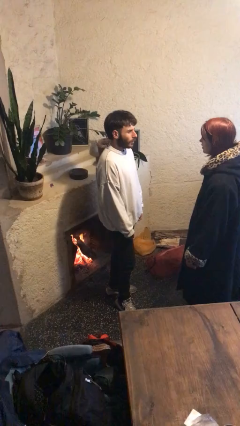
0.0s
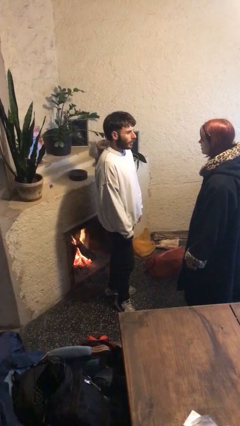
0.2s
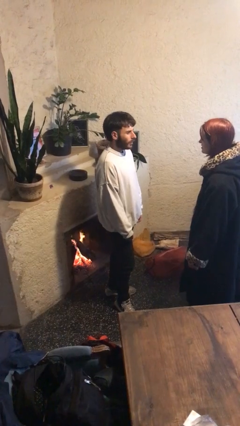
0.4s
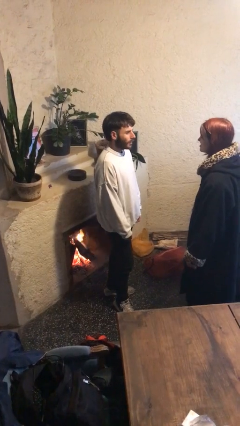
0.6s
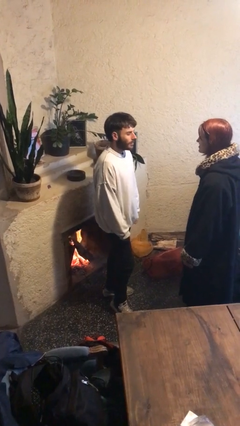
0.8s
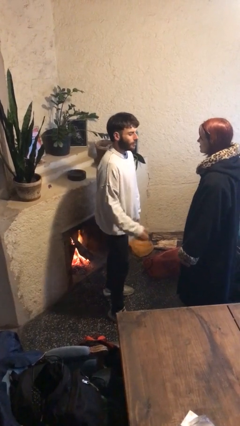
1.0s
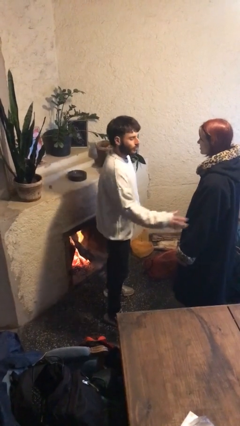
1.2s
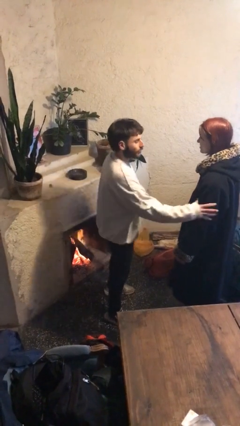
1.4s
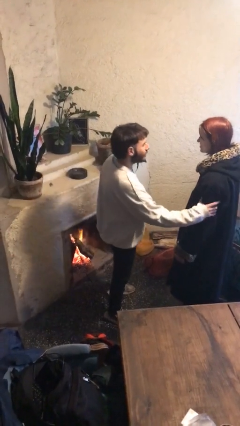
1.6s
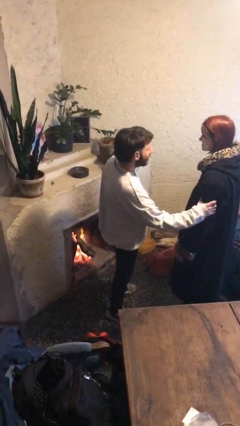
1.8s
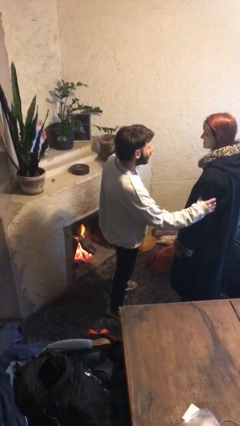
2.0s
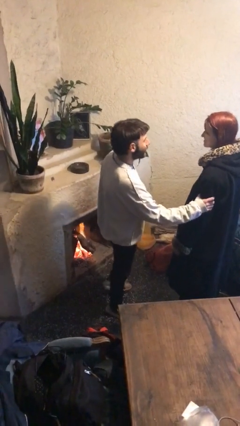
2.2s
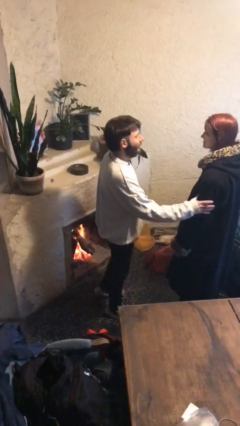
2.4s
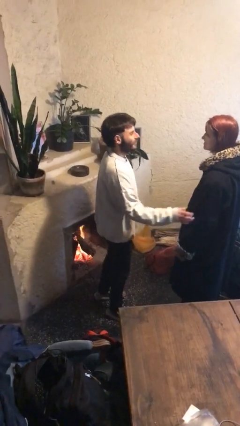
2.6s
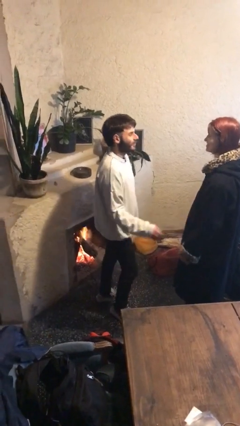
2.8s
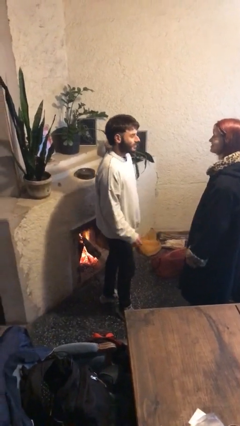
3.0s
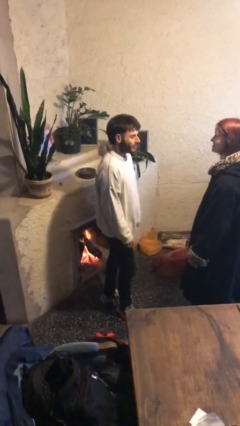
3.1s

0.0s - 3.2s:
person grabs person by bicep

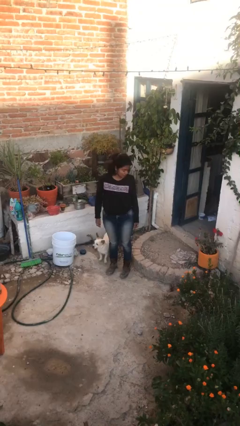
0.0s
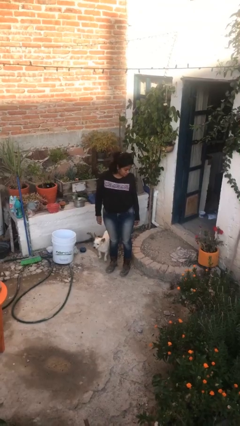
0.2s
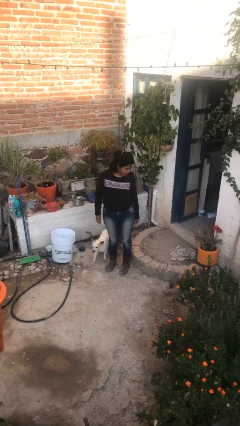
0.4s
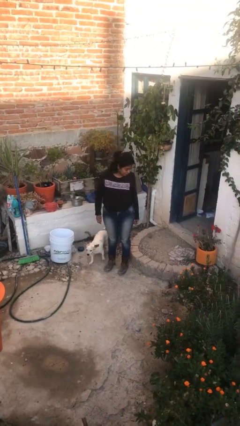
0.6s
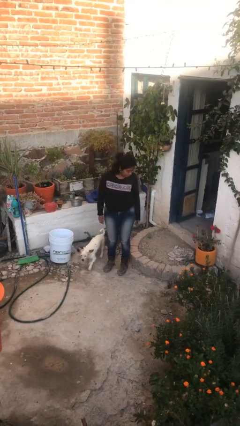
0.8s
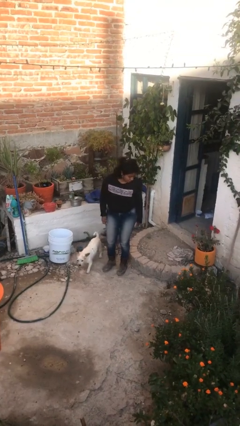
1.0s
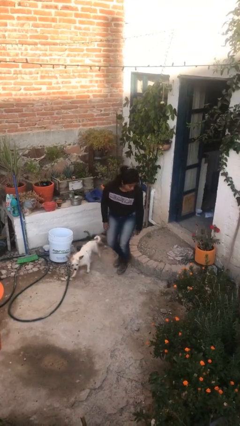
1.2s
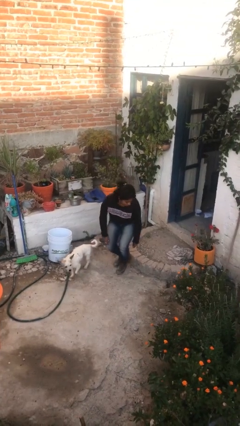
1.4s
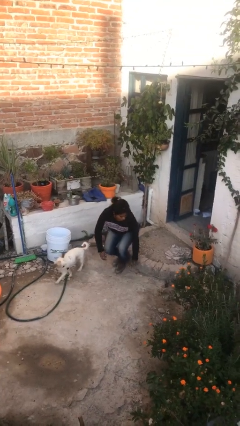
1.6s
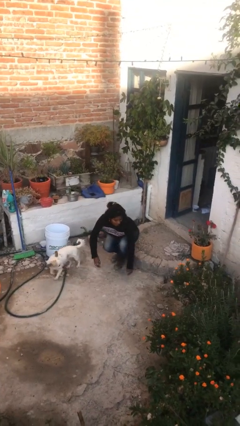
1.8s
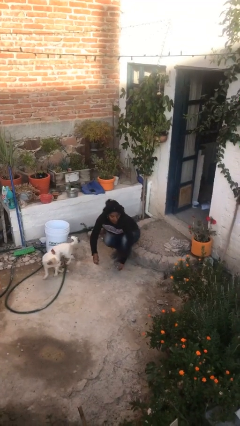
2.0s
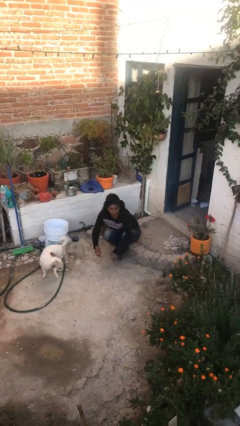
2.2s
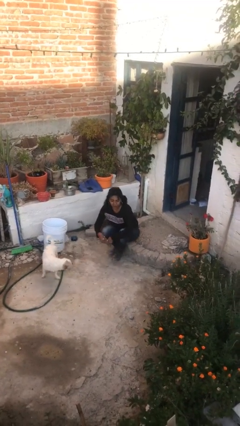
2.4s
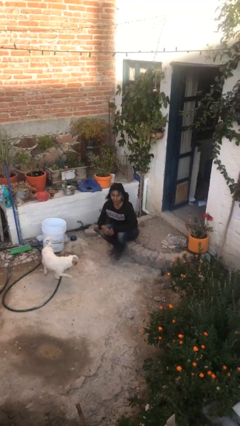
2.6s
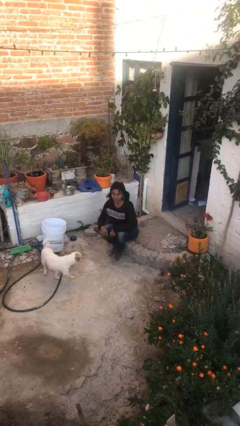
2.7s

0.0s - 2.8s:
person sits down

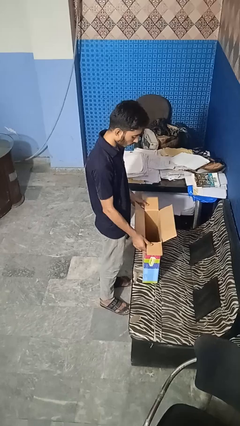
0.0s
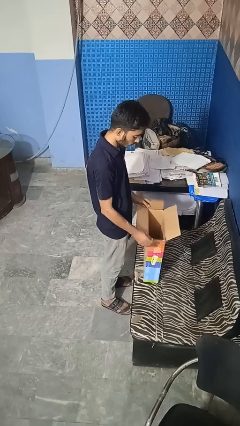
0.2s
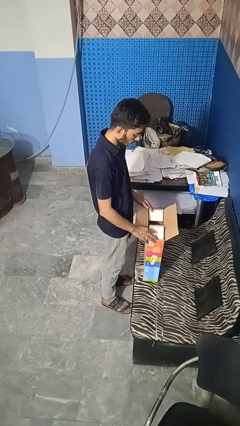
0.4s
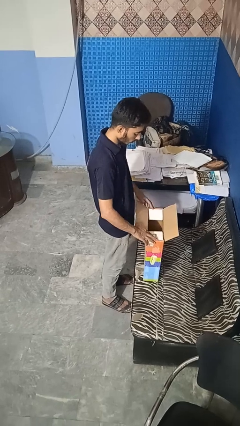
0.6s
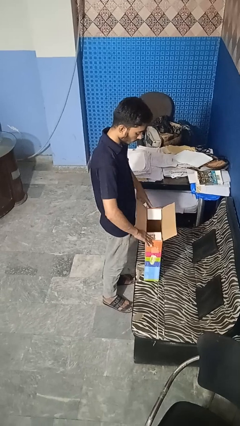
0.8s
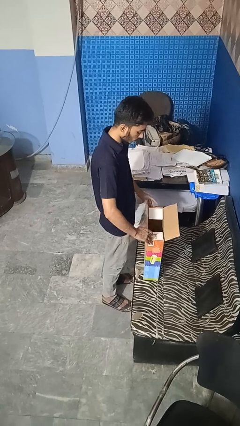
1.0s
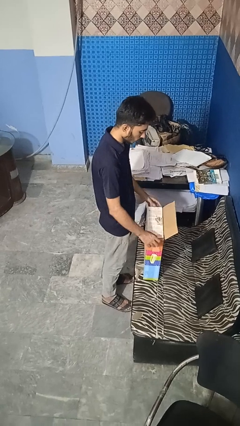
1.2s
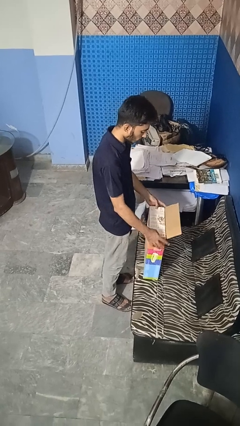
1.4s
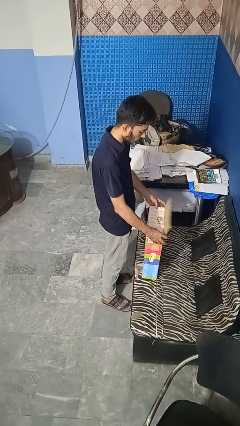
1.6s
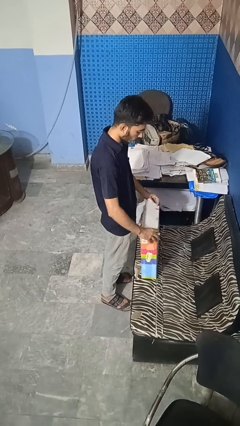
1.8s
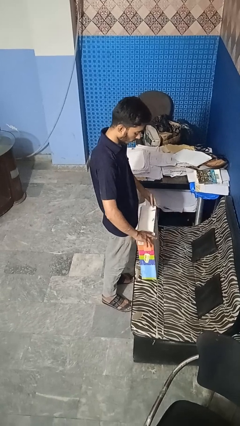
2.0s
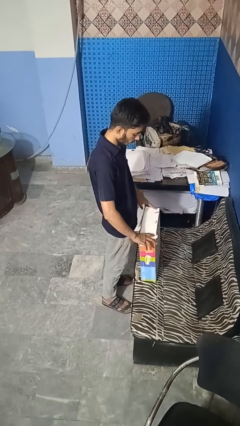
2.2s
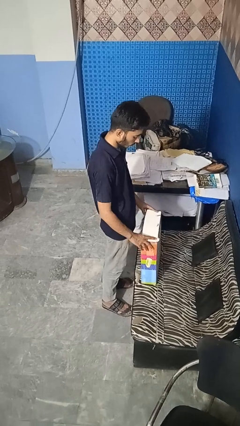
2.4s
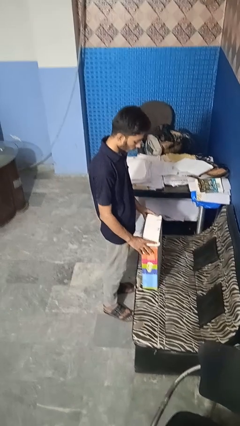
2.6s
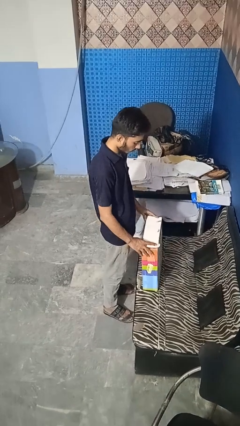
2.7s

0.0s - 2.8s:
person closes box

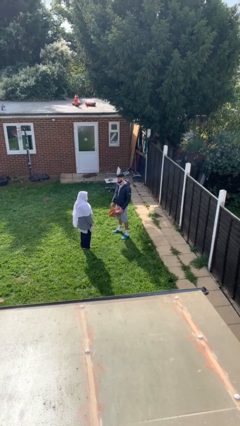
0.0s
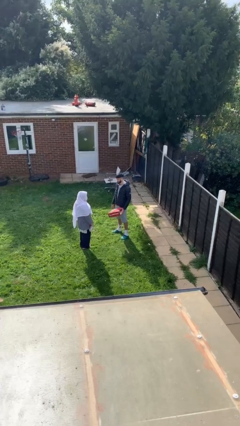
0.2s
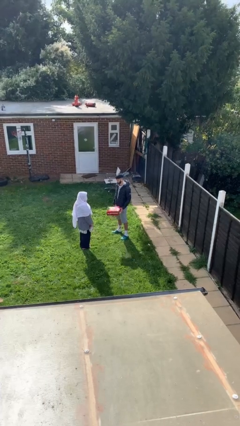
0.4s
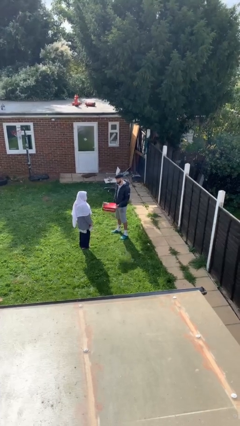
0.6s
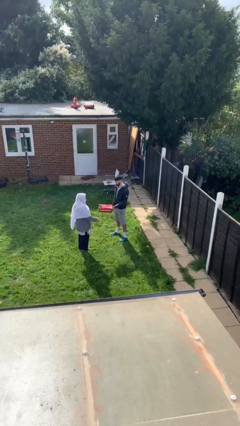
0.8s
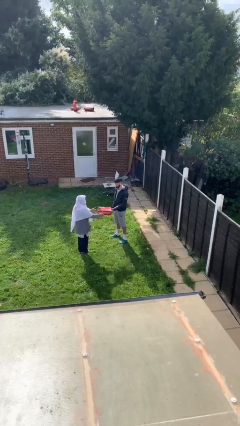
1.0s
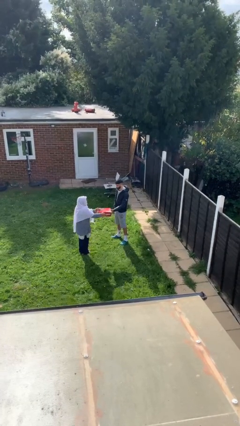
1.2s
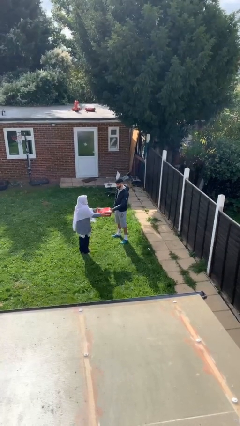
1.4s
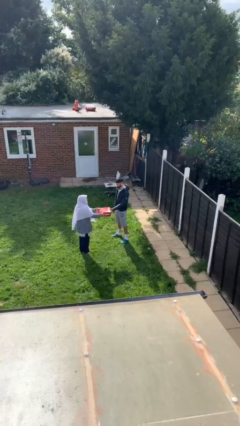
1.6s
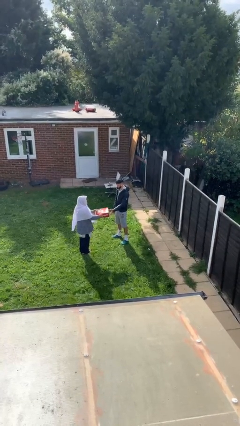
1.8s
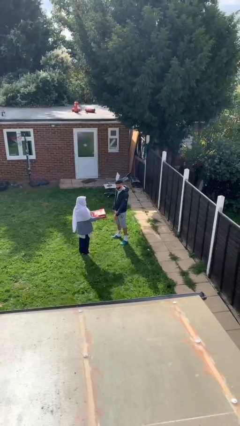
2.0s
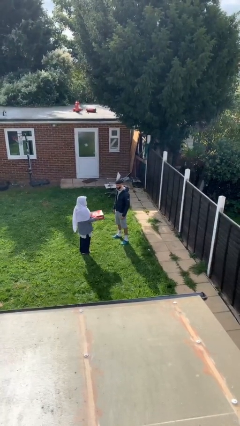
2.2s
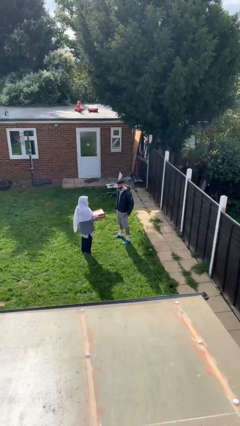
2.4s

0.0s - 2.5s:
person transfers object to person

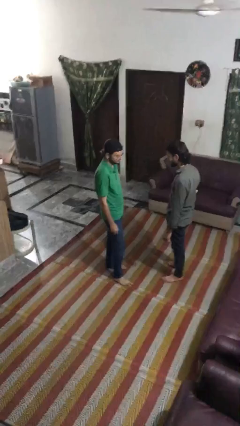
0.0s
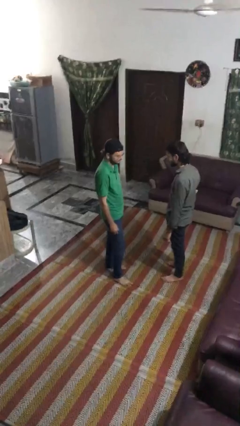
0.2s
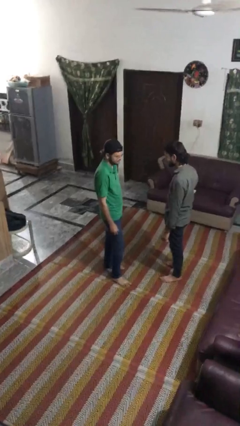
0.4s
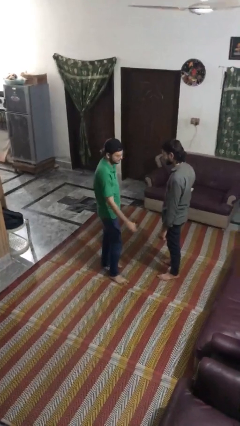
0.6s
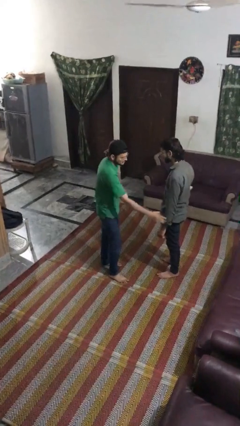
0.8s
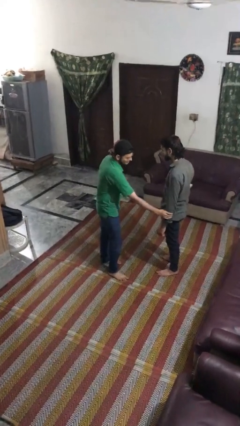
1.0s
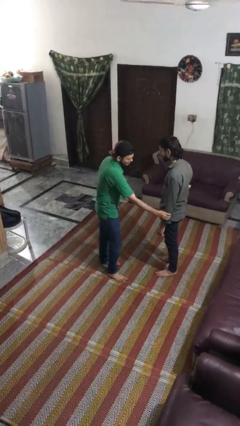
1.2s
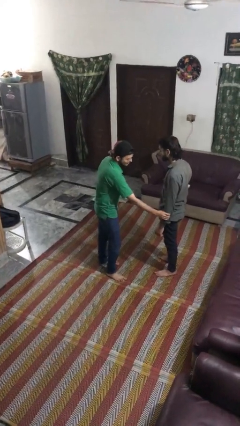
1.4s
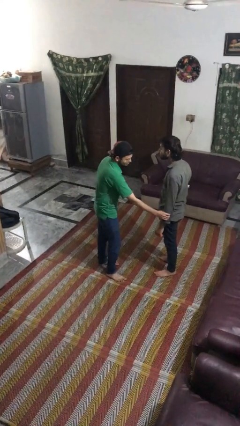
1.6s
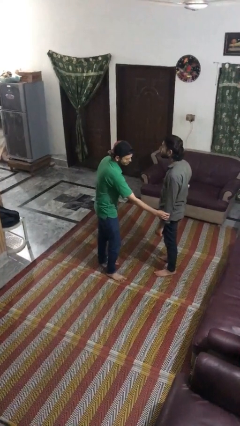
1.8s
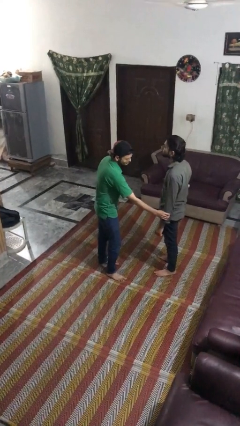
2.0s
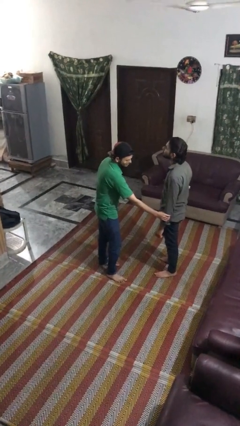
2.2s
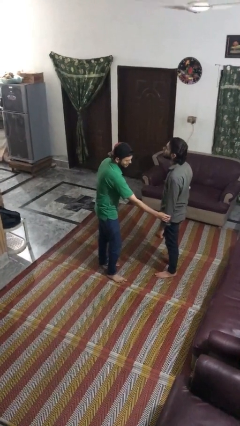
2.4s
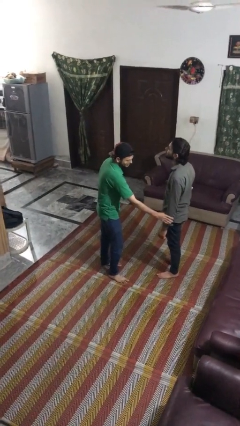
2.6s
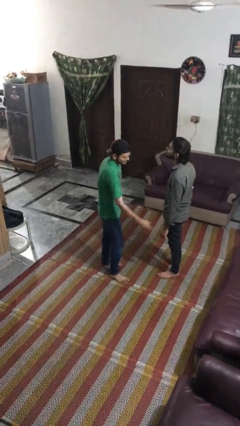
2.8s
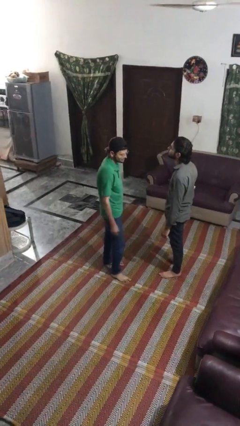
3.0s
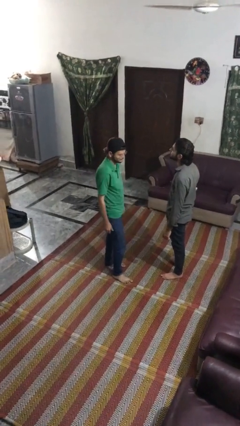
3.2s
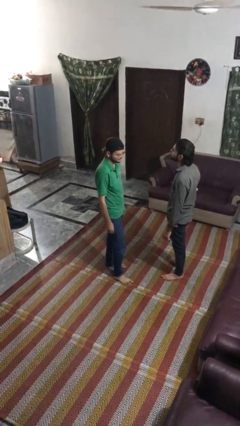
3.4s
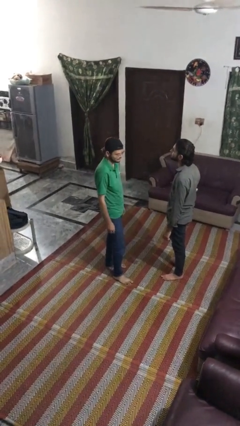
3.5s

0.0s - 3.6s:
person grabs person by forearm

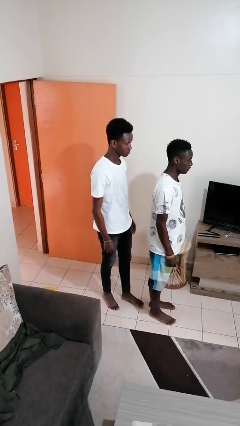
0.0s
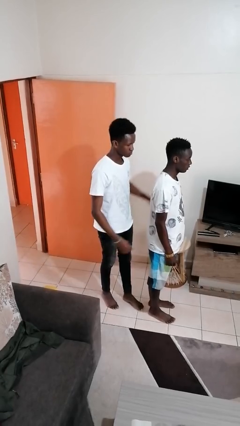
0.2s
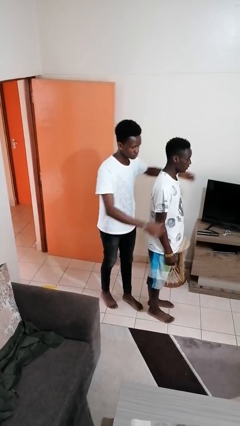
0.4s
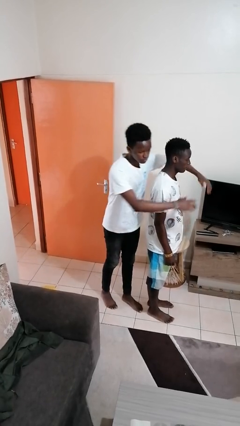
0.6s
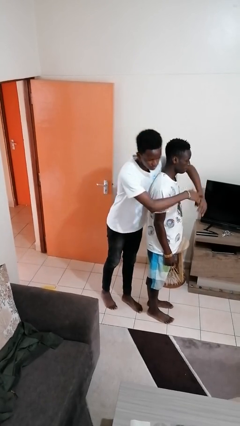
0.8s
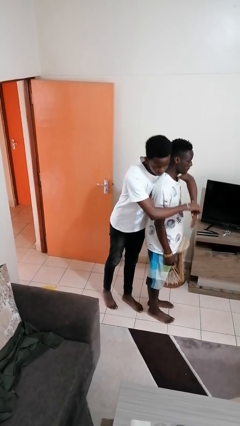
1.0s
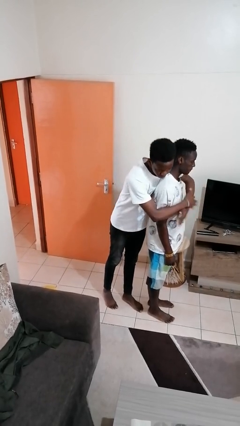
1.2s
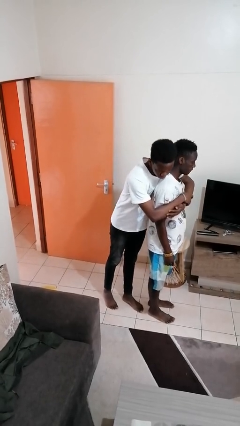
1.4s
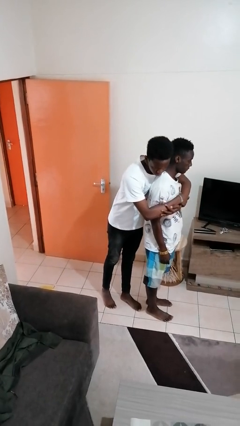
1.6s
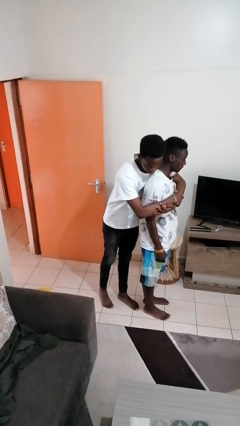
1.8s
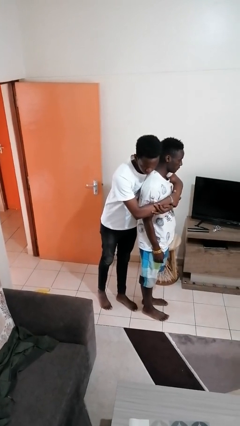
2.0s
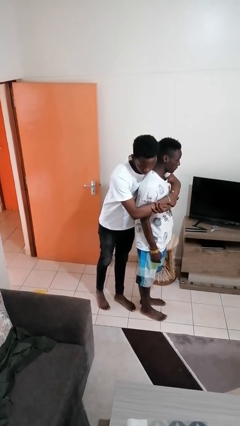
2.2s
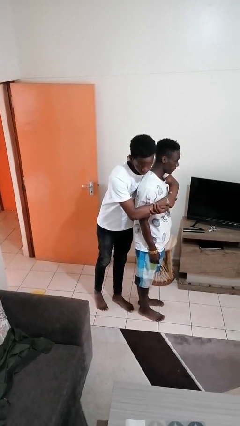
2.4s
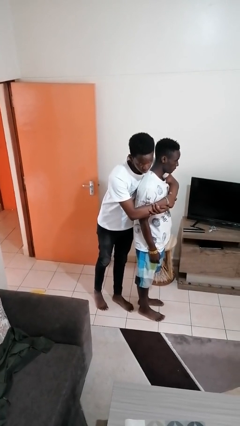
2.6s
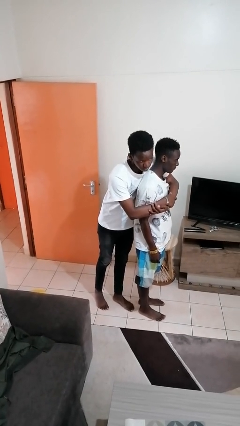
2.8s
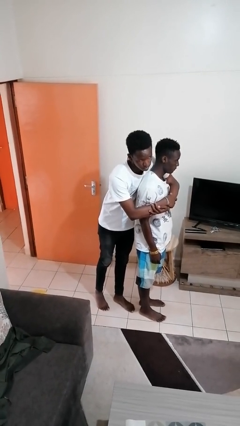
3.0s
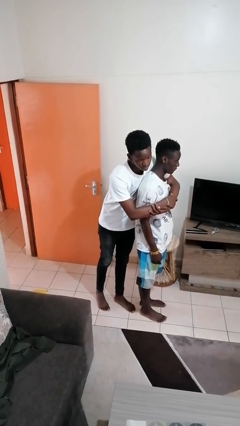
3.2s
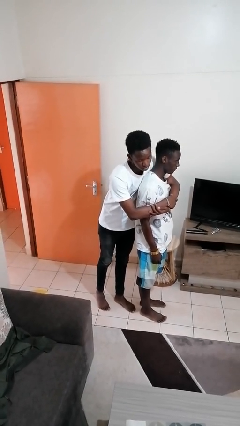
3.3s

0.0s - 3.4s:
person hugs person from behind
